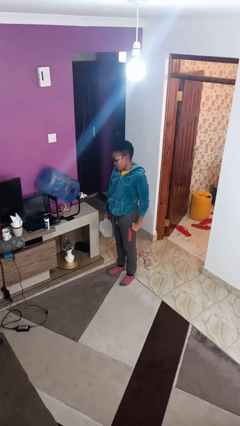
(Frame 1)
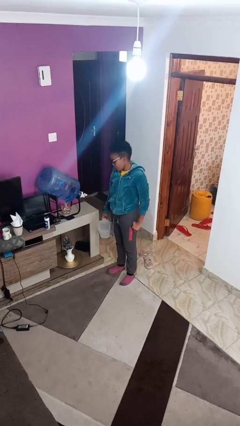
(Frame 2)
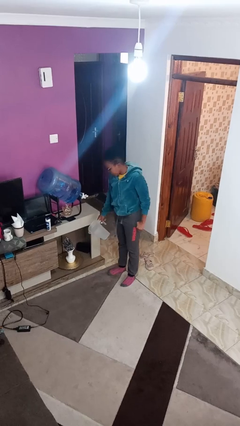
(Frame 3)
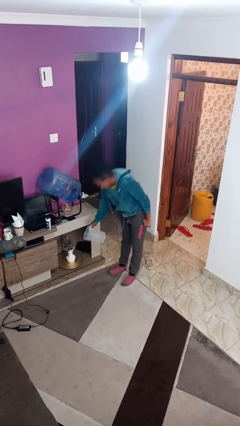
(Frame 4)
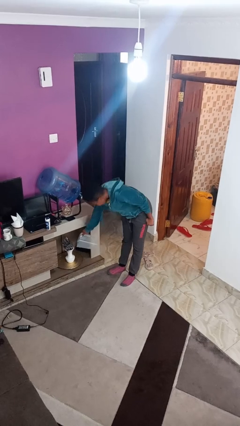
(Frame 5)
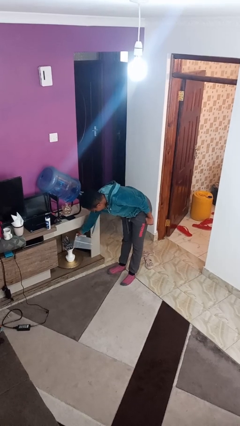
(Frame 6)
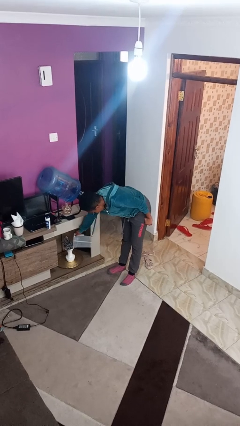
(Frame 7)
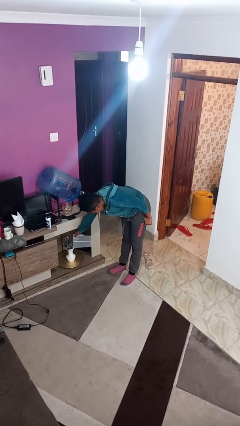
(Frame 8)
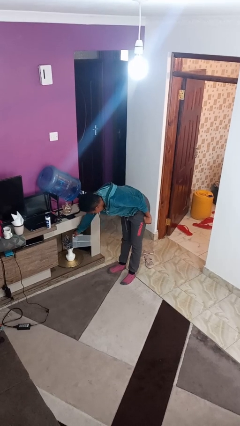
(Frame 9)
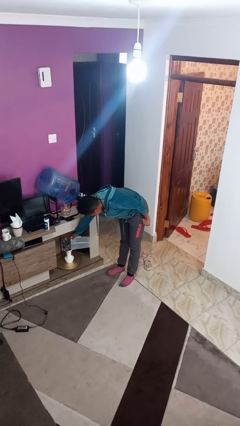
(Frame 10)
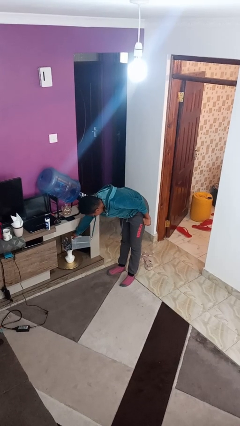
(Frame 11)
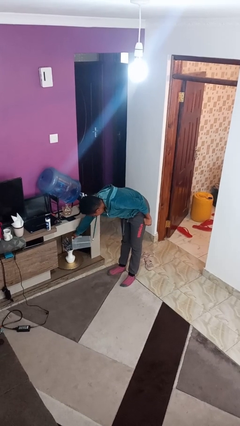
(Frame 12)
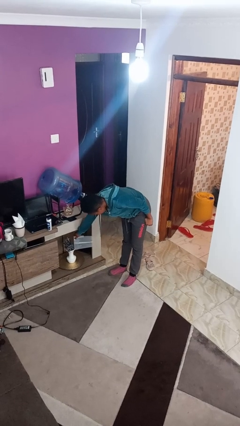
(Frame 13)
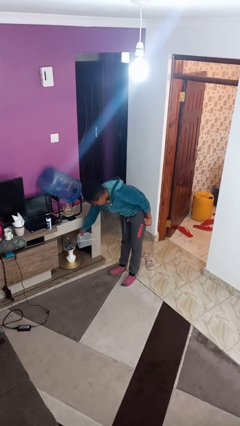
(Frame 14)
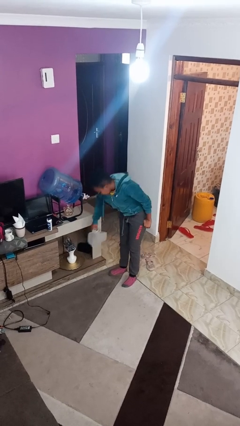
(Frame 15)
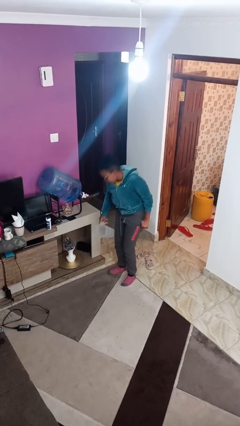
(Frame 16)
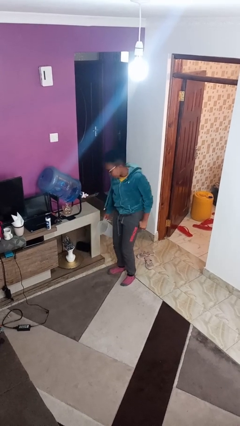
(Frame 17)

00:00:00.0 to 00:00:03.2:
person waters houseplant

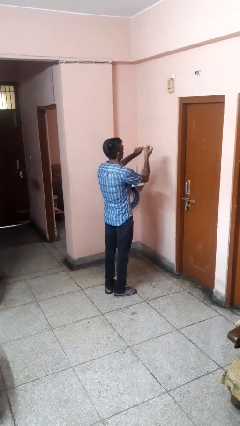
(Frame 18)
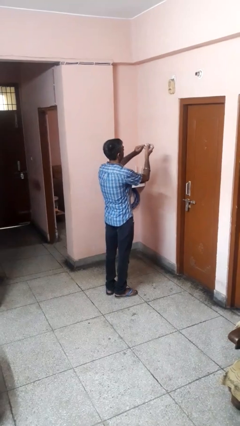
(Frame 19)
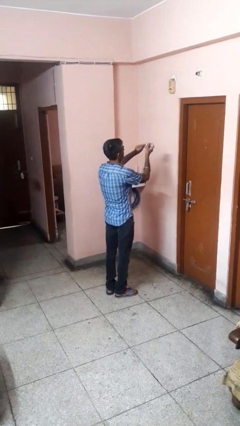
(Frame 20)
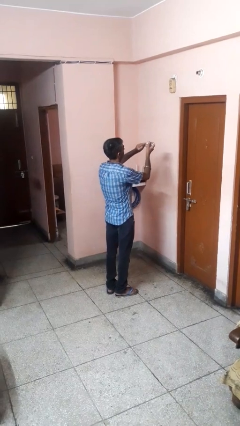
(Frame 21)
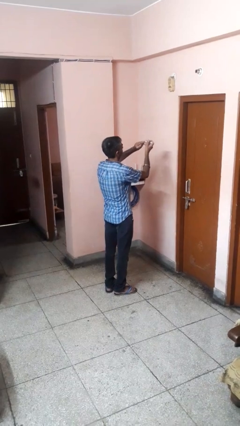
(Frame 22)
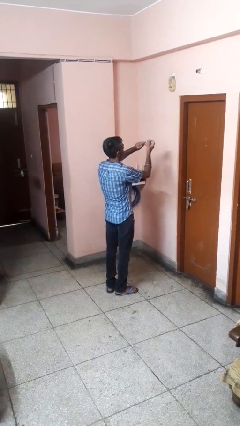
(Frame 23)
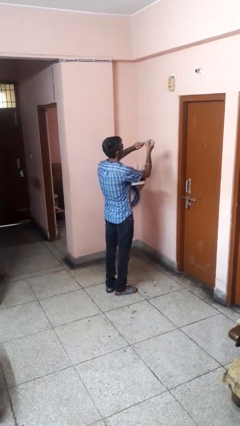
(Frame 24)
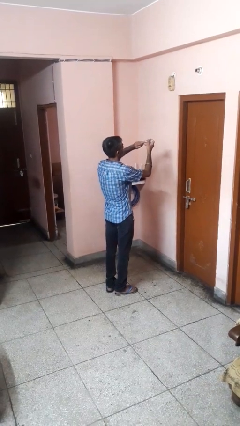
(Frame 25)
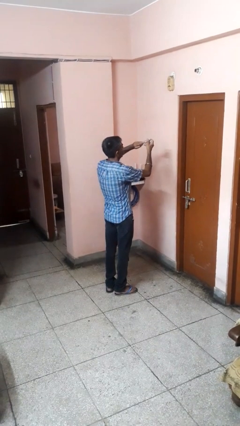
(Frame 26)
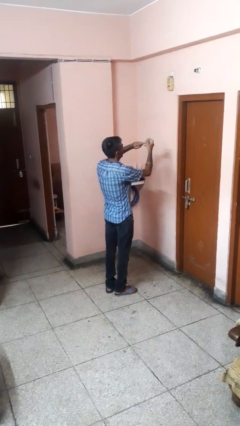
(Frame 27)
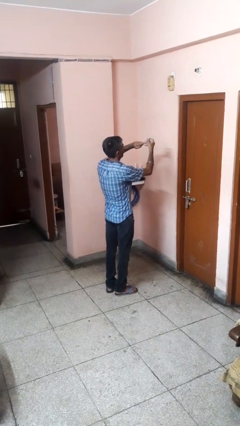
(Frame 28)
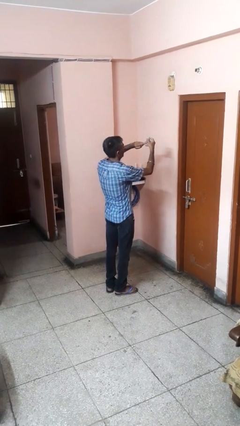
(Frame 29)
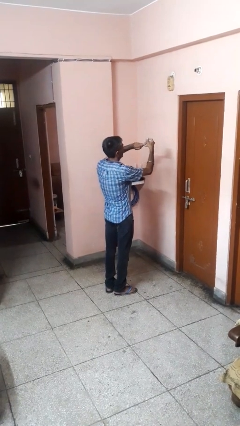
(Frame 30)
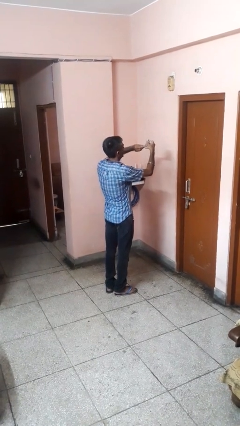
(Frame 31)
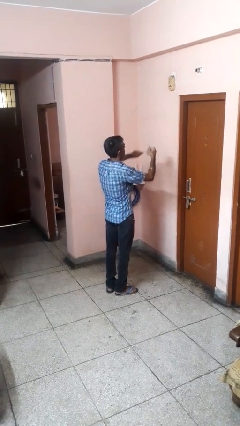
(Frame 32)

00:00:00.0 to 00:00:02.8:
person clips fingernails

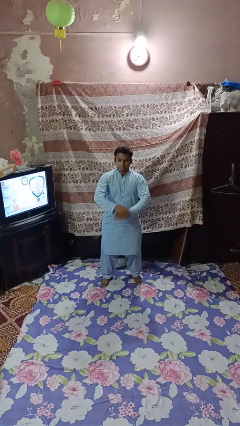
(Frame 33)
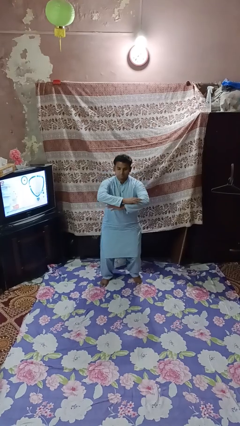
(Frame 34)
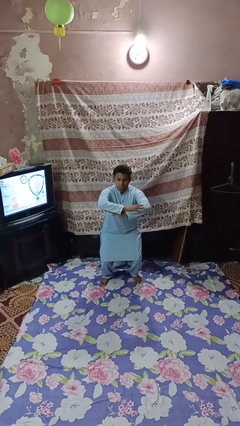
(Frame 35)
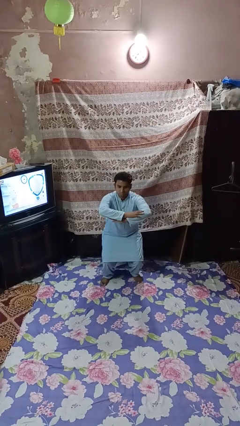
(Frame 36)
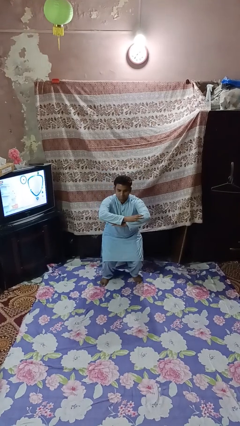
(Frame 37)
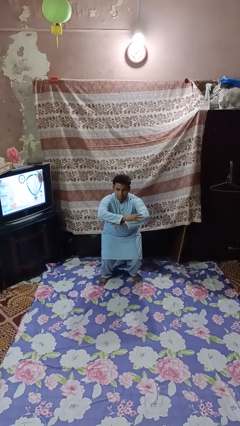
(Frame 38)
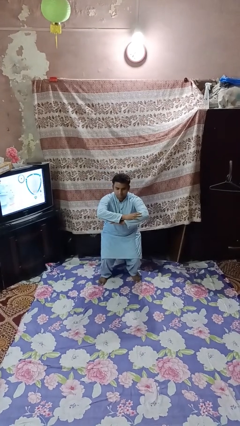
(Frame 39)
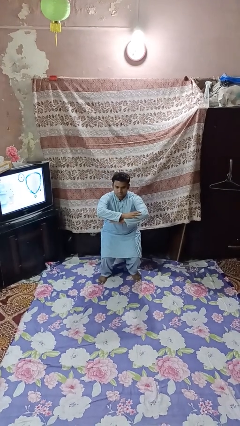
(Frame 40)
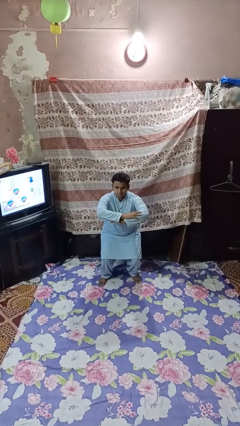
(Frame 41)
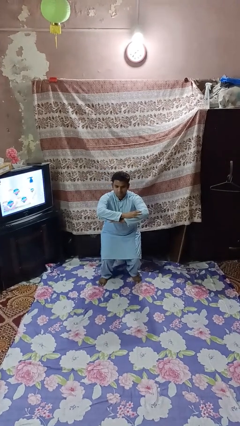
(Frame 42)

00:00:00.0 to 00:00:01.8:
person squats

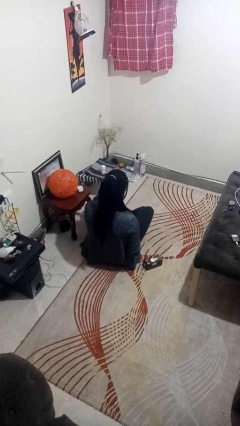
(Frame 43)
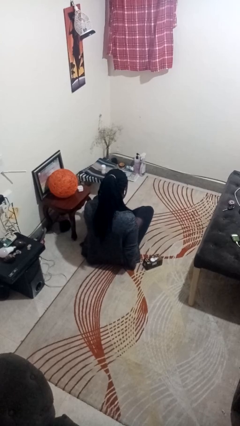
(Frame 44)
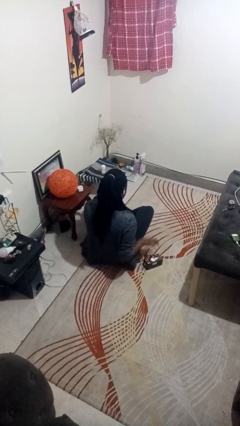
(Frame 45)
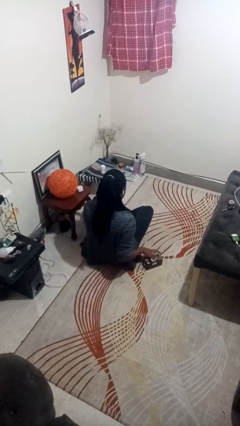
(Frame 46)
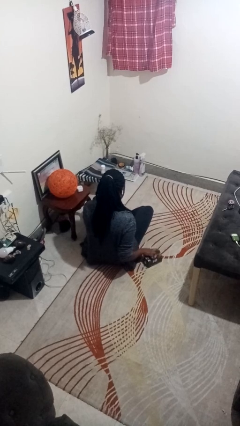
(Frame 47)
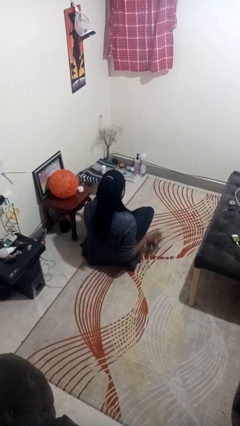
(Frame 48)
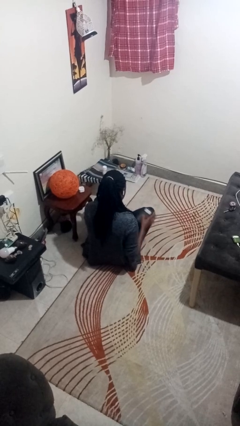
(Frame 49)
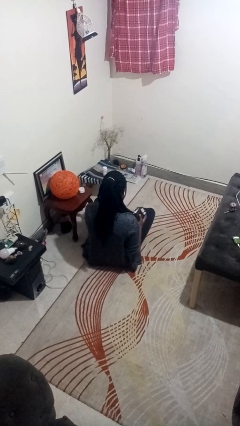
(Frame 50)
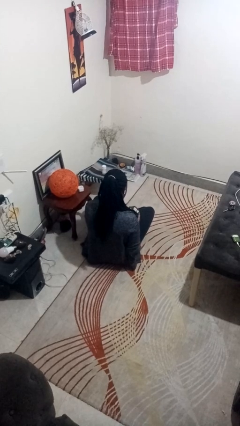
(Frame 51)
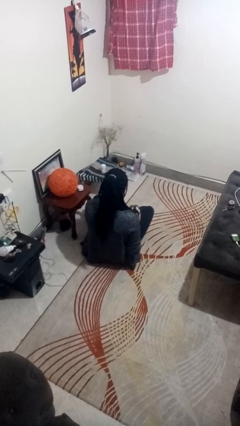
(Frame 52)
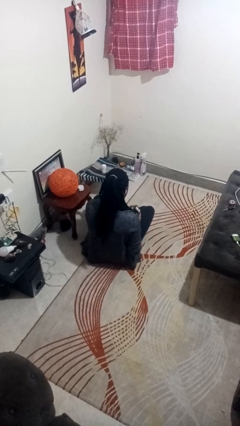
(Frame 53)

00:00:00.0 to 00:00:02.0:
person picks up object from floor

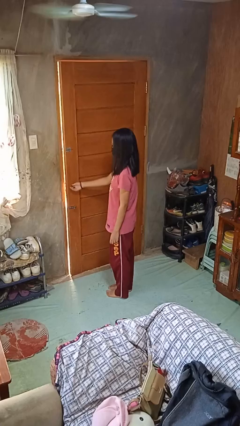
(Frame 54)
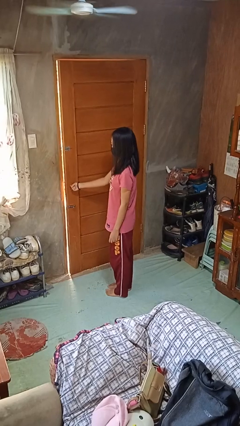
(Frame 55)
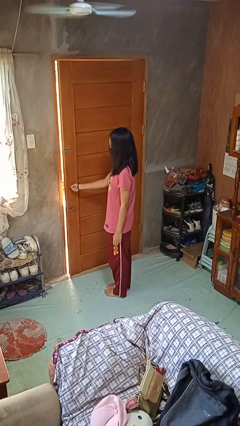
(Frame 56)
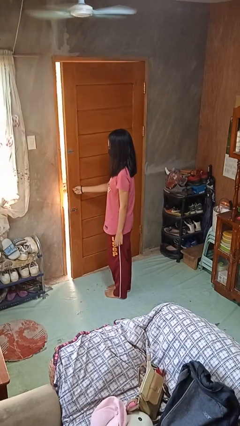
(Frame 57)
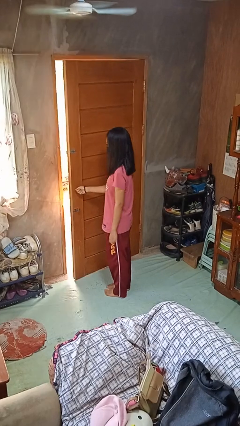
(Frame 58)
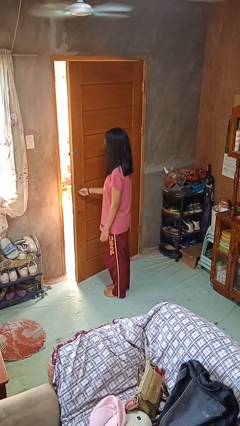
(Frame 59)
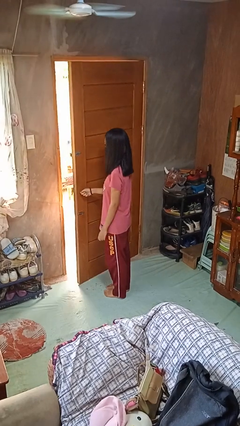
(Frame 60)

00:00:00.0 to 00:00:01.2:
person opens facility door

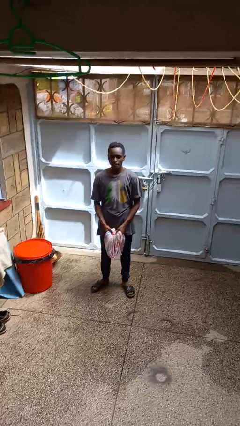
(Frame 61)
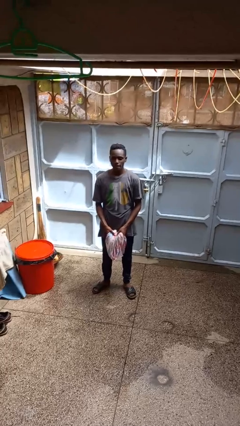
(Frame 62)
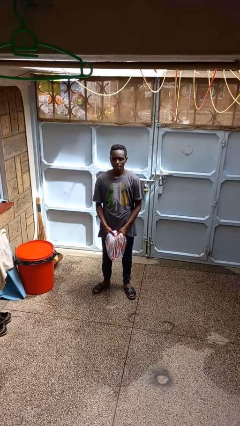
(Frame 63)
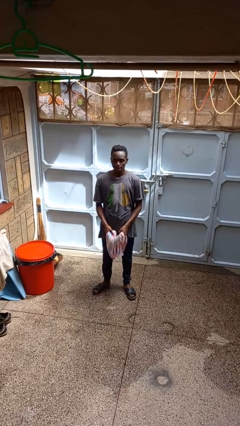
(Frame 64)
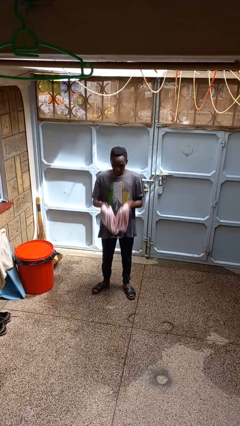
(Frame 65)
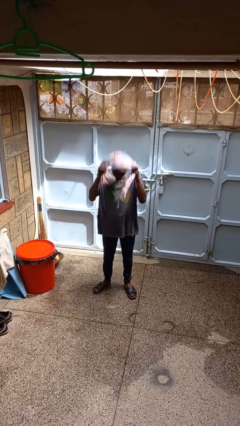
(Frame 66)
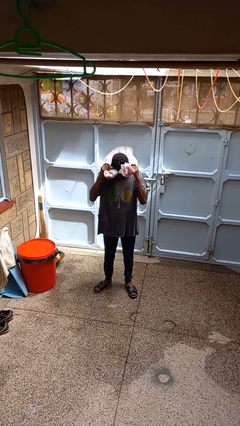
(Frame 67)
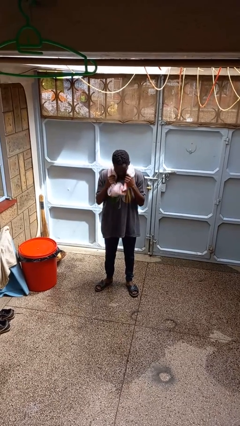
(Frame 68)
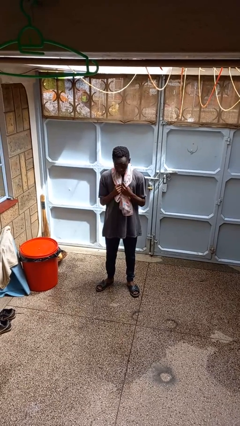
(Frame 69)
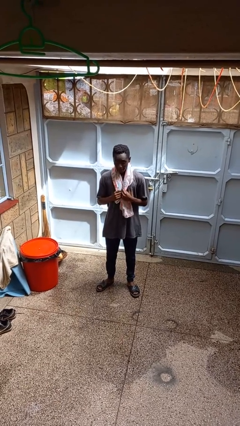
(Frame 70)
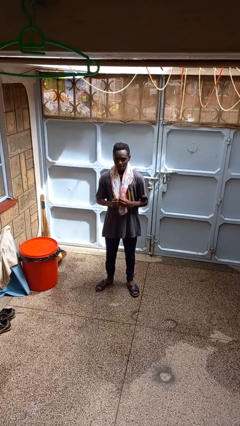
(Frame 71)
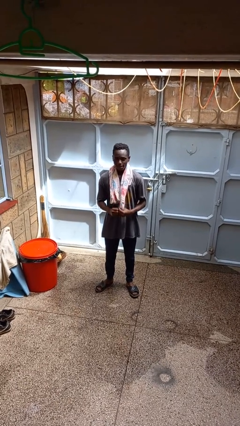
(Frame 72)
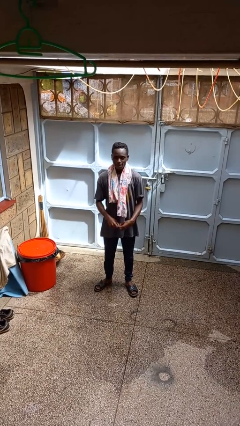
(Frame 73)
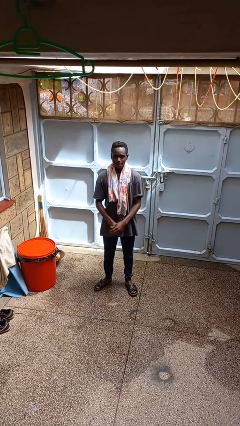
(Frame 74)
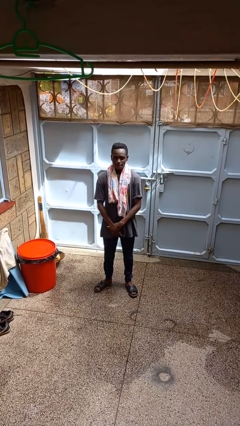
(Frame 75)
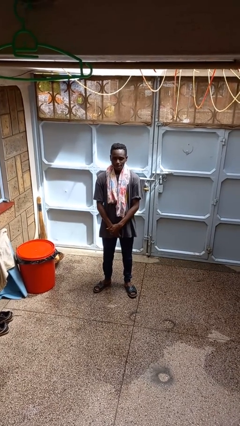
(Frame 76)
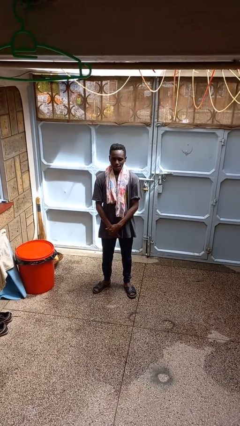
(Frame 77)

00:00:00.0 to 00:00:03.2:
person puts on scarf

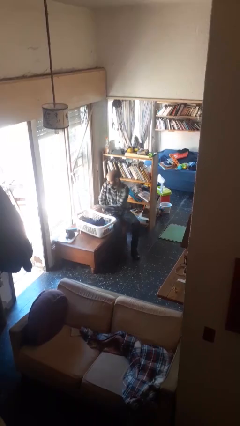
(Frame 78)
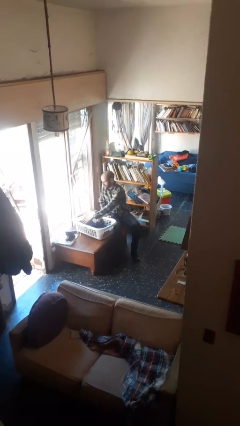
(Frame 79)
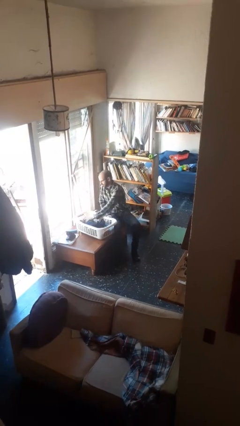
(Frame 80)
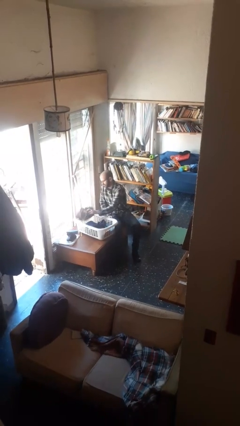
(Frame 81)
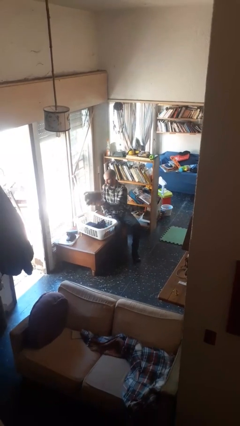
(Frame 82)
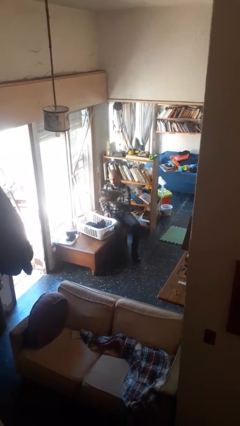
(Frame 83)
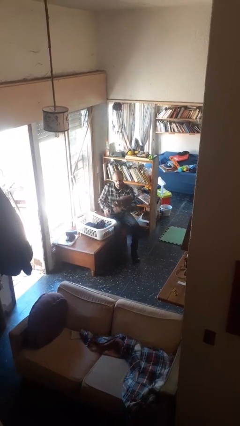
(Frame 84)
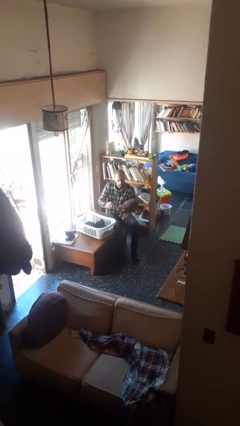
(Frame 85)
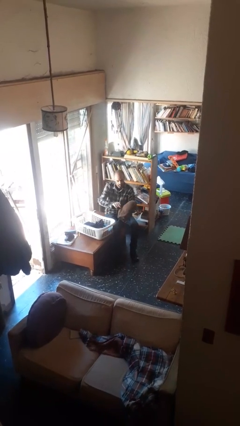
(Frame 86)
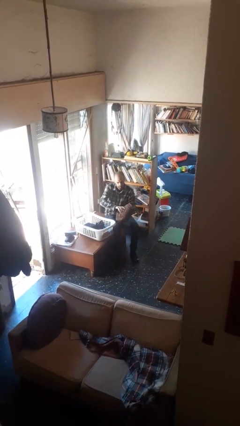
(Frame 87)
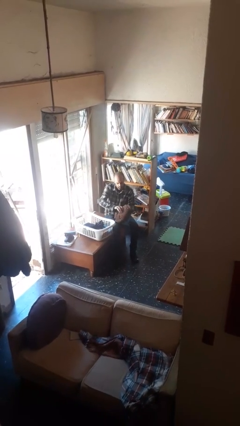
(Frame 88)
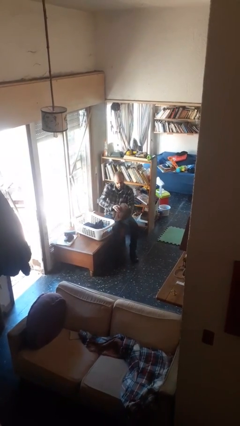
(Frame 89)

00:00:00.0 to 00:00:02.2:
person takes object from basket

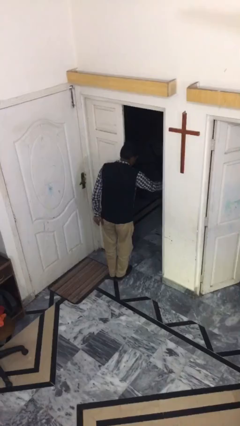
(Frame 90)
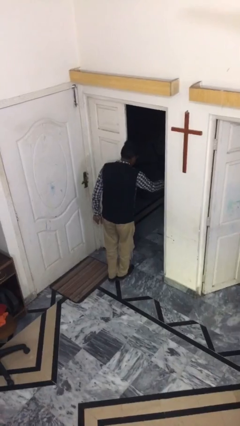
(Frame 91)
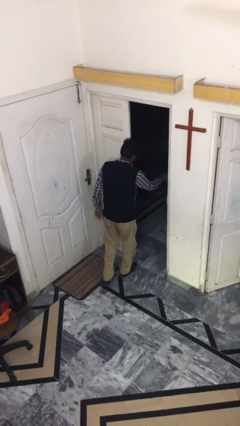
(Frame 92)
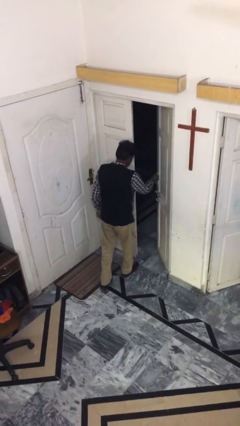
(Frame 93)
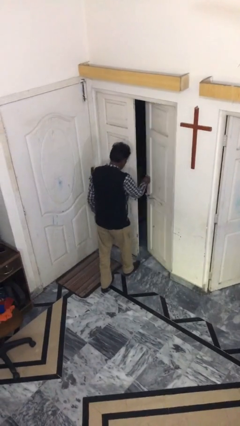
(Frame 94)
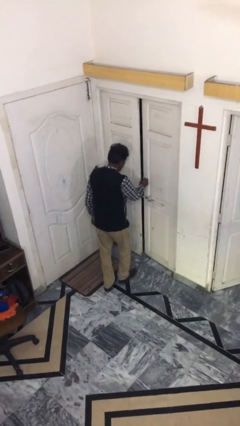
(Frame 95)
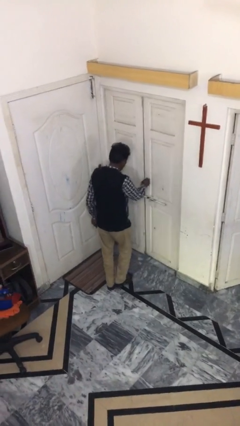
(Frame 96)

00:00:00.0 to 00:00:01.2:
person closes facility door
